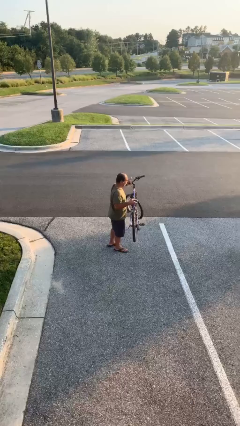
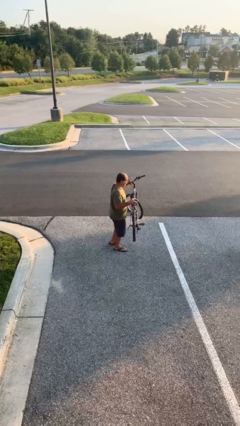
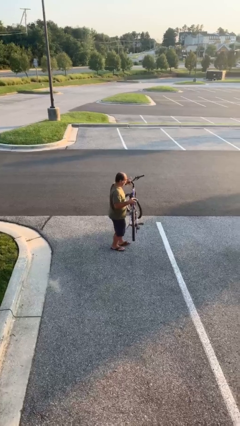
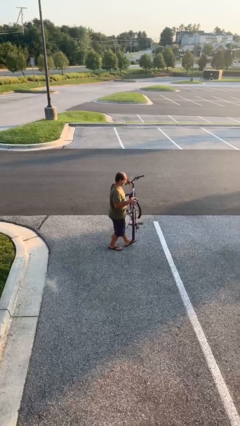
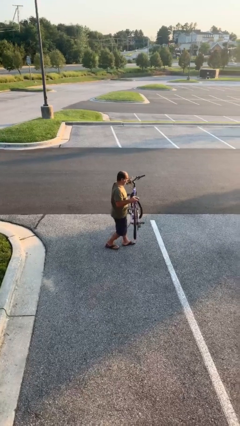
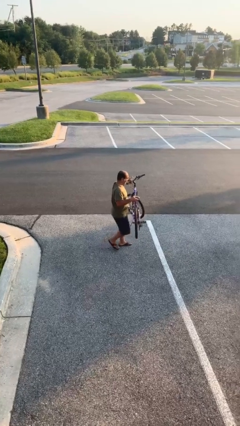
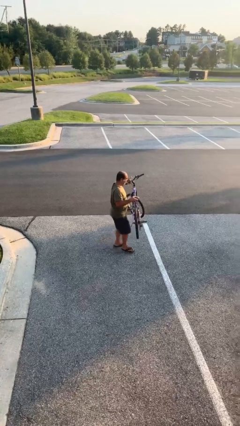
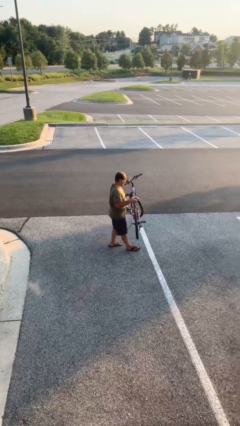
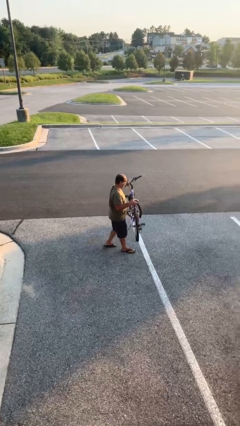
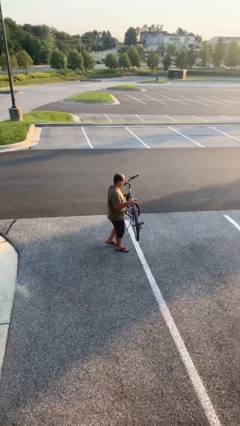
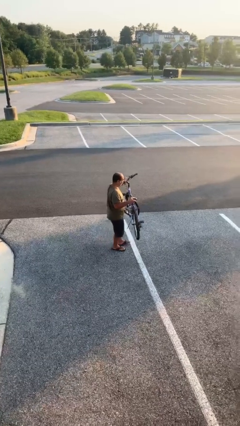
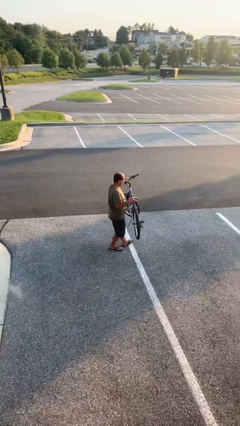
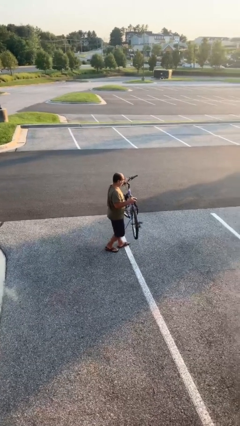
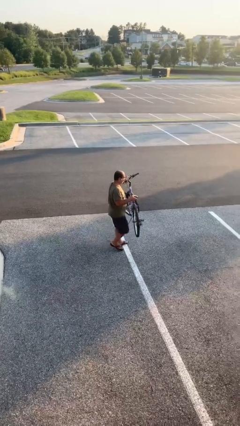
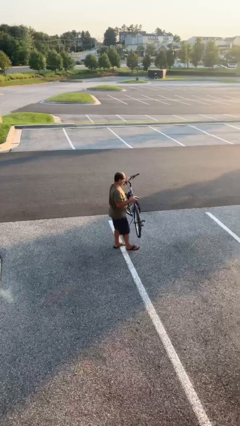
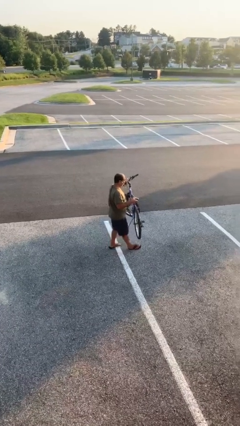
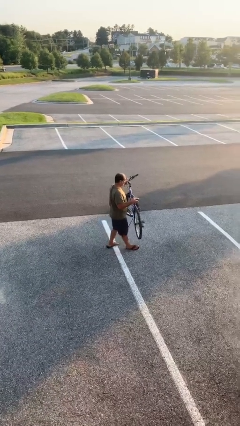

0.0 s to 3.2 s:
person carries heavy object

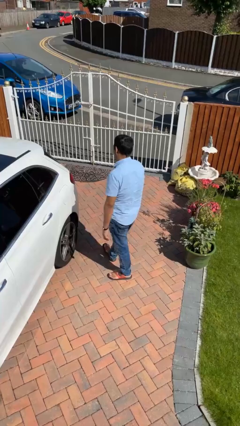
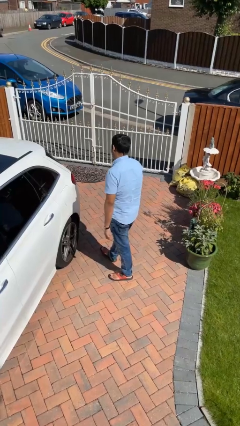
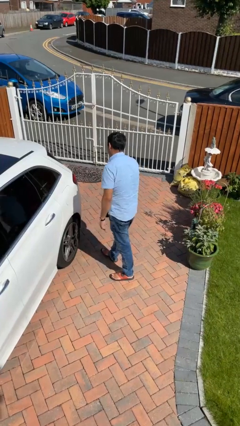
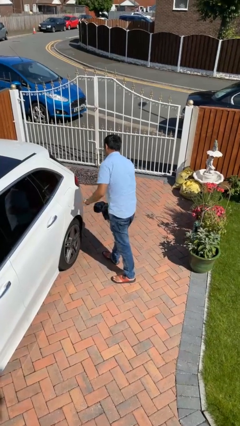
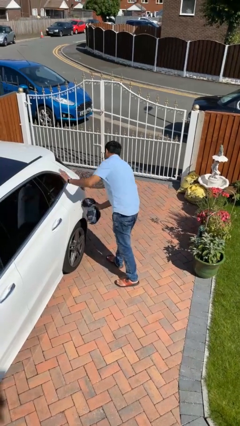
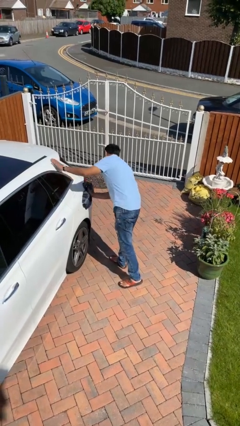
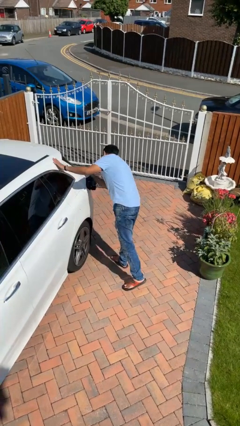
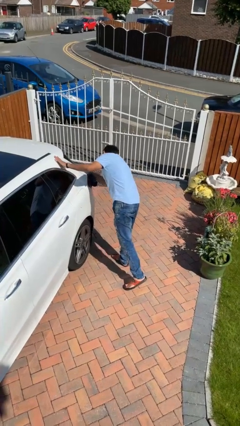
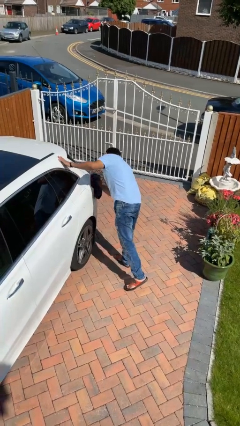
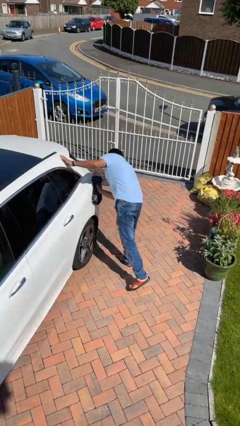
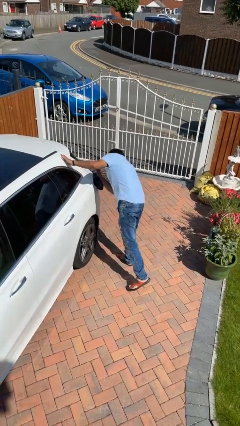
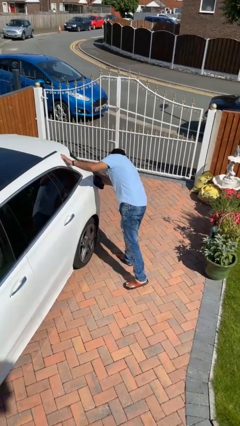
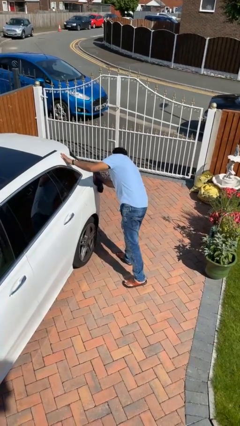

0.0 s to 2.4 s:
person polishes car with rag

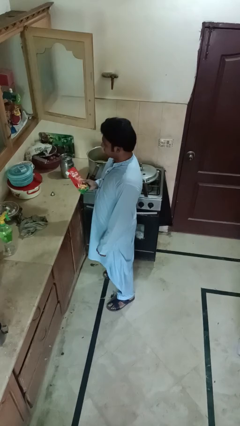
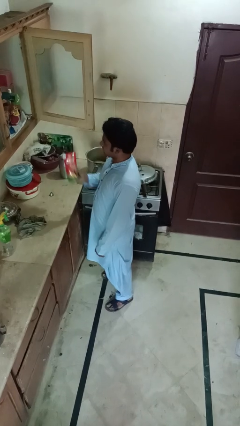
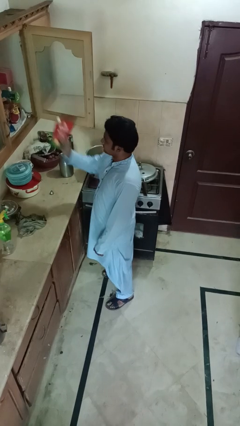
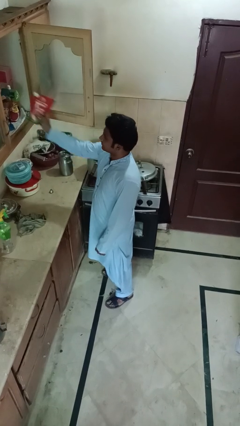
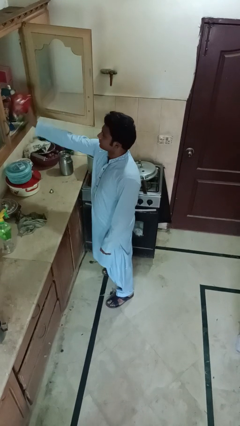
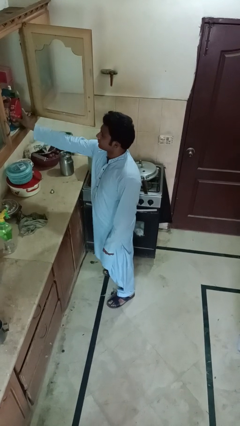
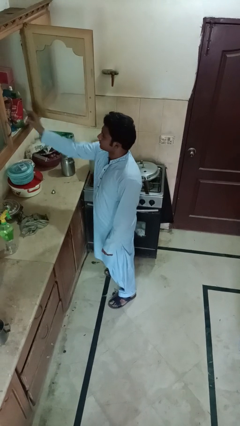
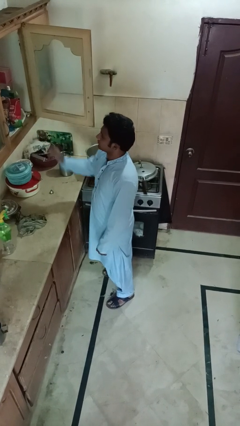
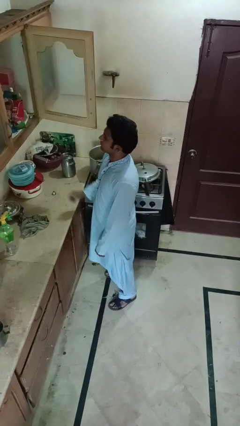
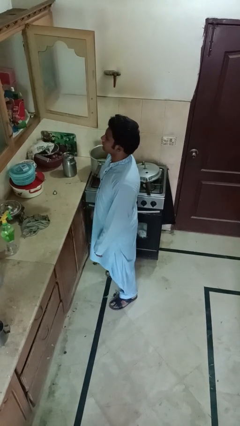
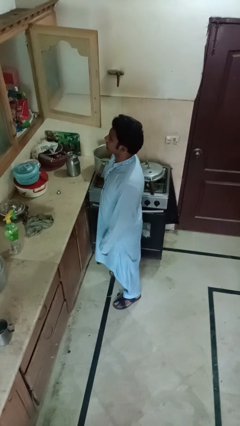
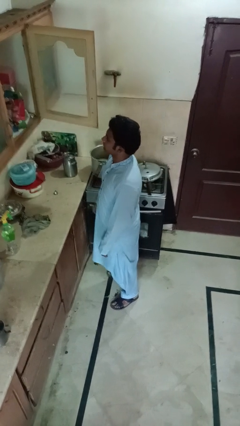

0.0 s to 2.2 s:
person puts down object into cabinet

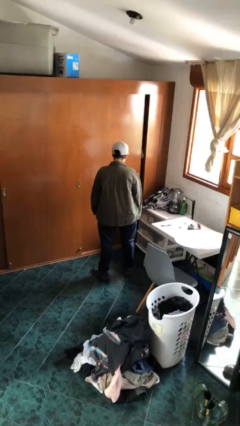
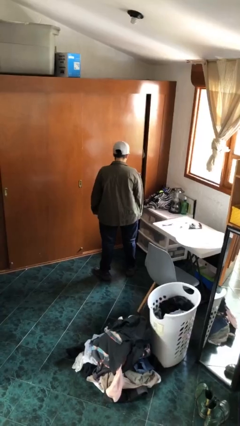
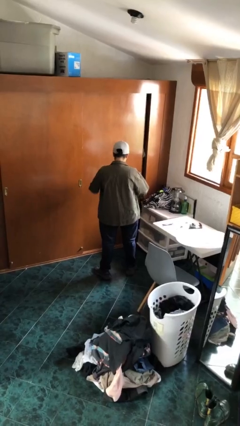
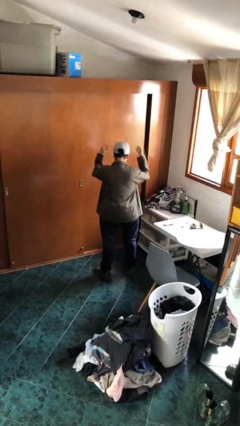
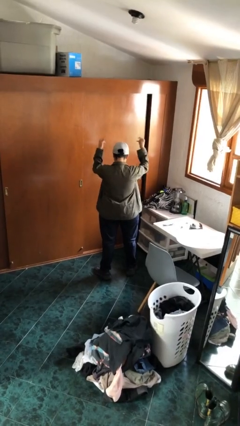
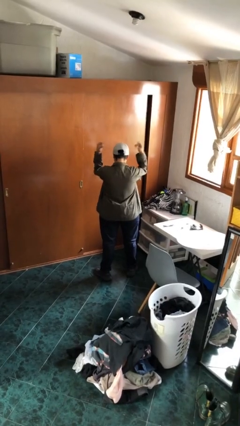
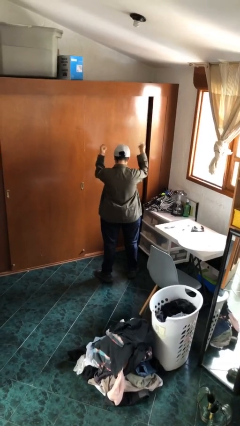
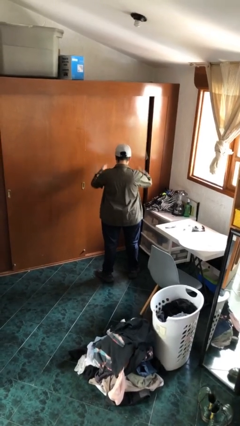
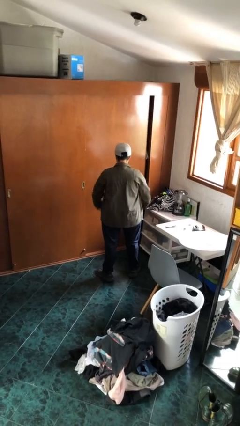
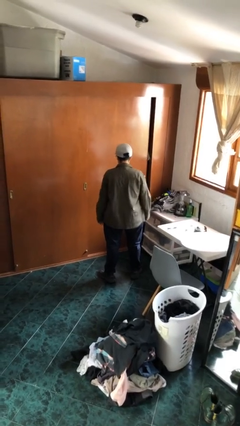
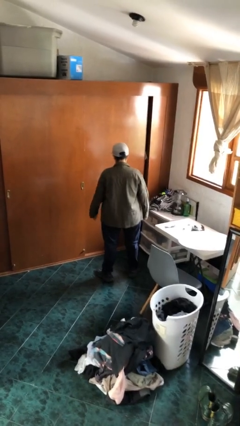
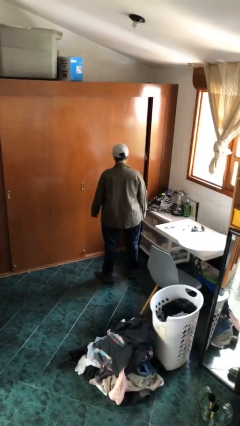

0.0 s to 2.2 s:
person snaps fingers

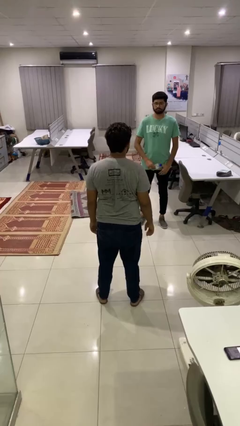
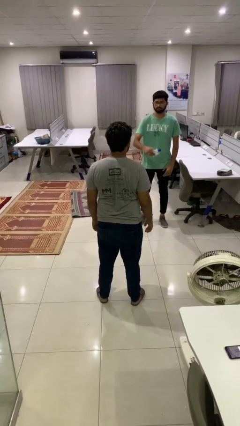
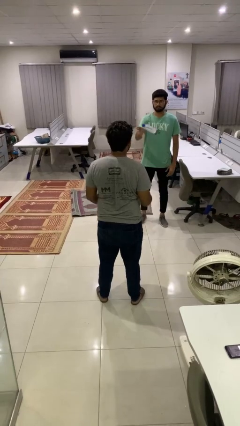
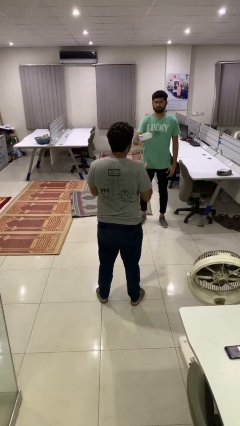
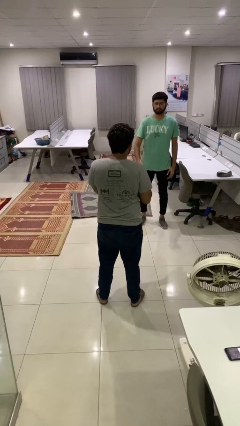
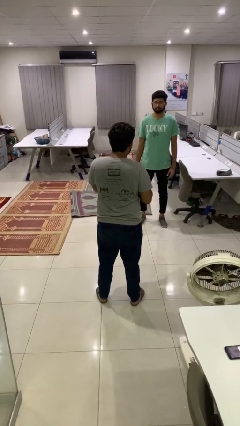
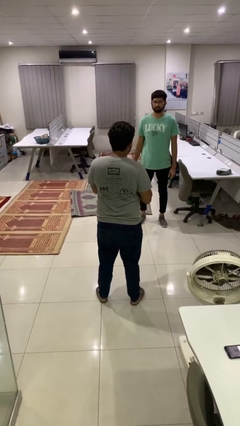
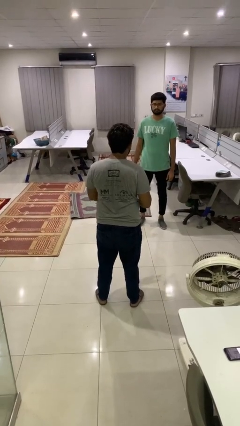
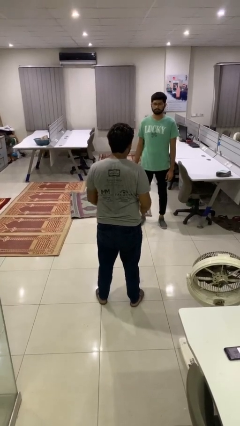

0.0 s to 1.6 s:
person catches object from person

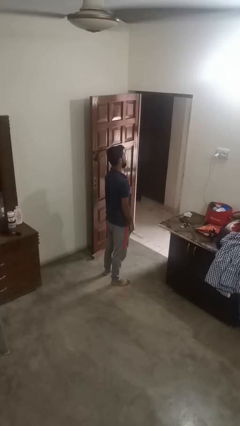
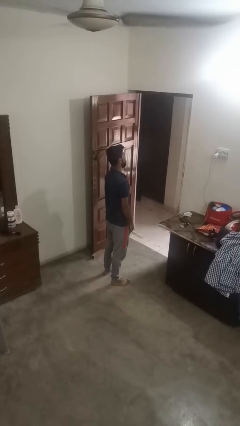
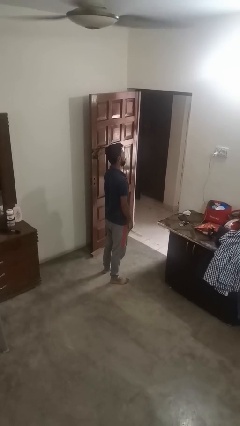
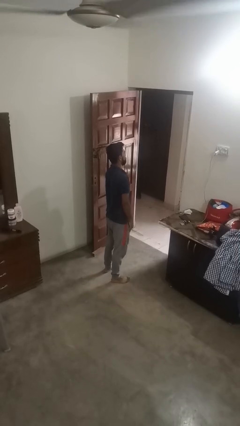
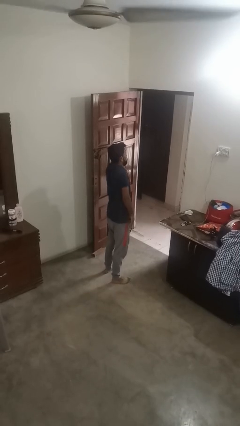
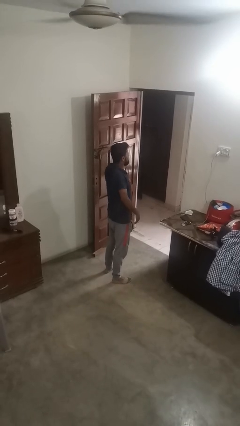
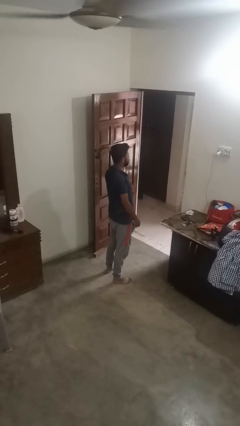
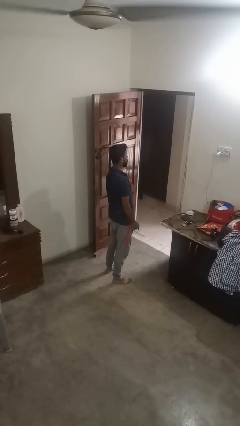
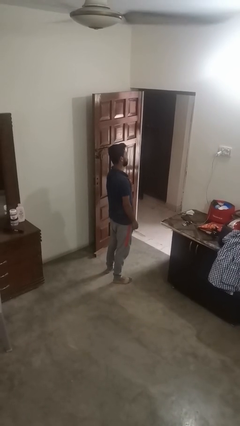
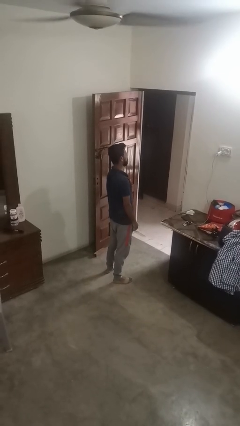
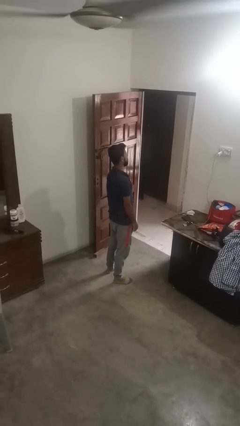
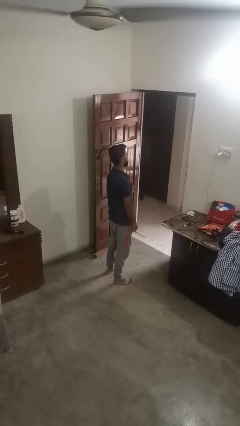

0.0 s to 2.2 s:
person shrugs

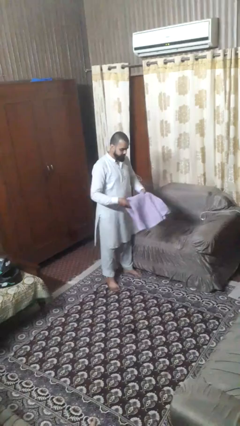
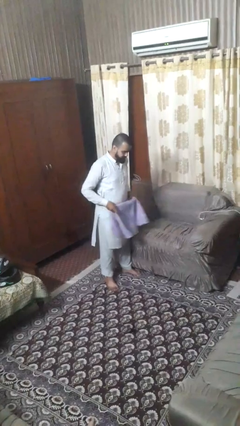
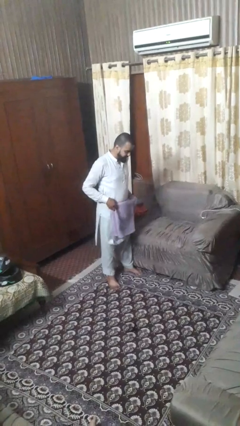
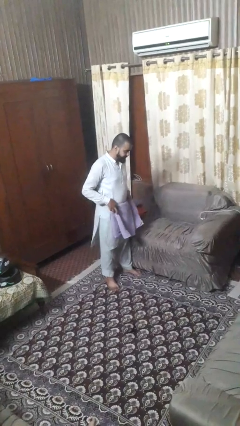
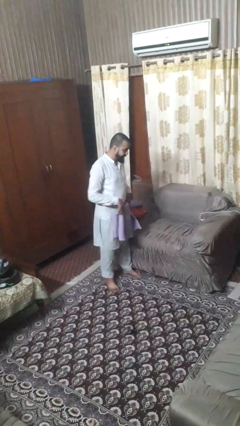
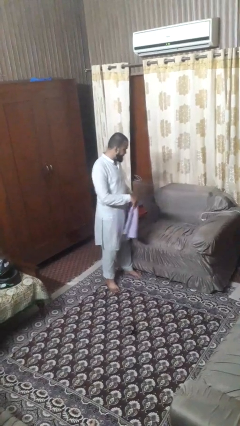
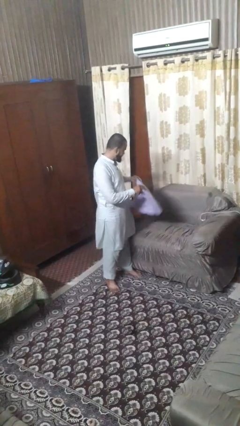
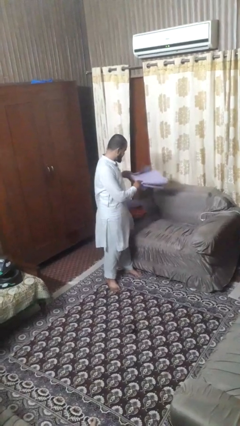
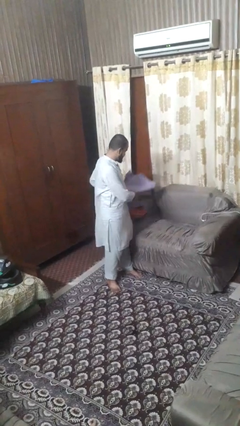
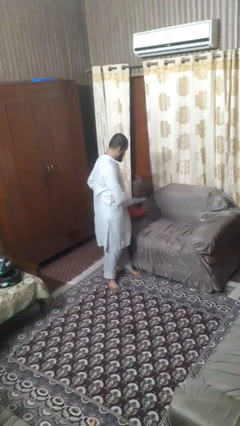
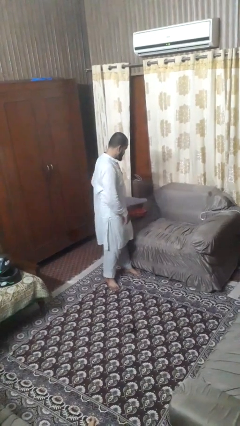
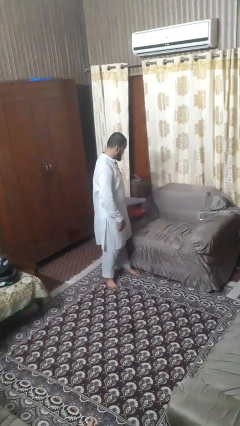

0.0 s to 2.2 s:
person folds towel

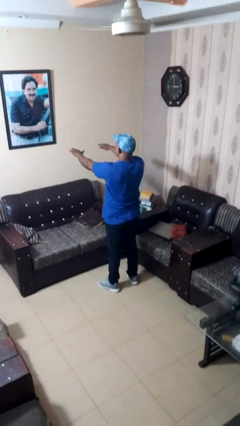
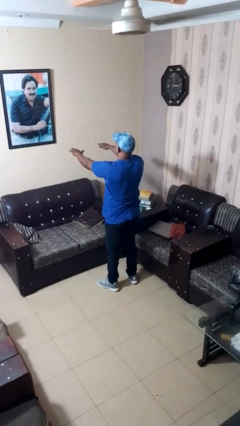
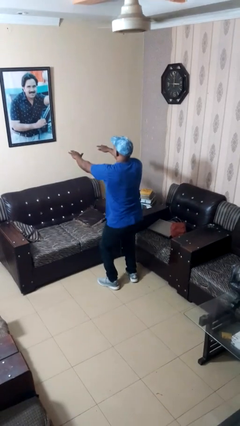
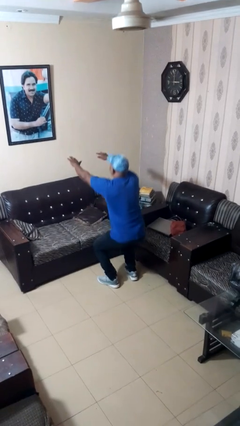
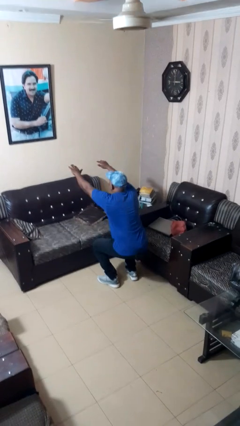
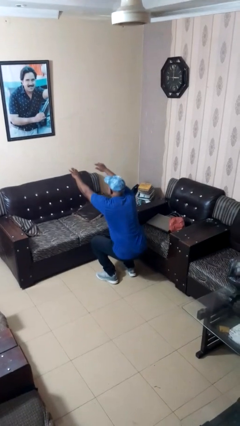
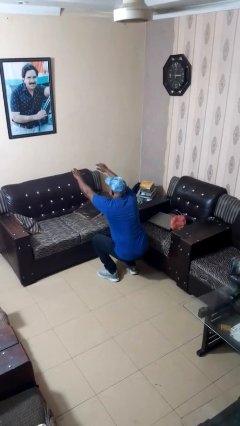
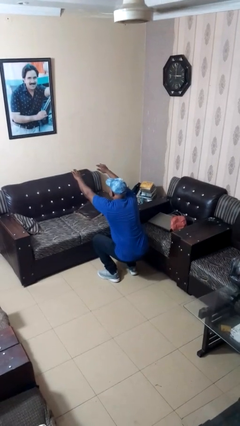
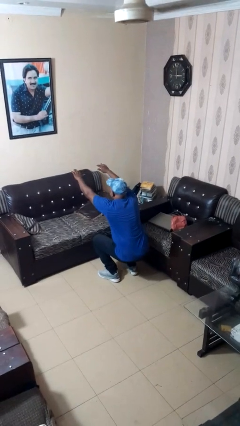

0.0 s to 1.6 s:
person squats
